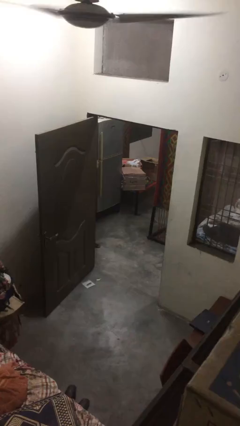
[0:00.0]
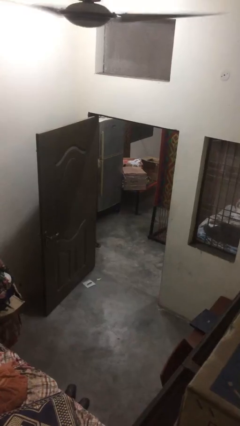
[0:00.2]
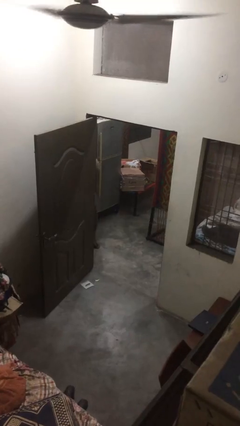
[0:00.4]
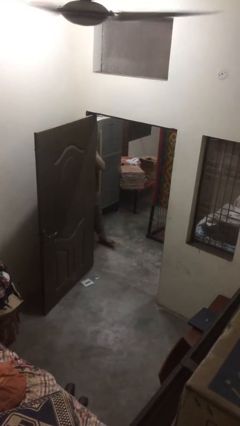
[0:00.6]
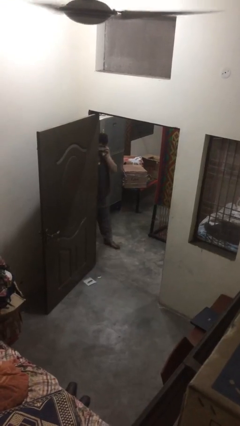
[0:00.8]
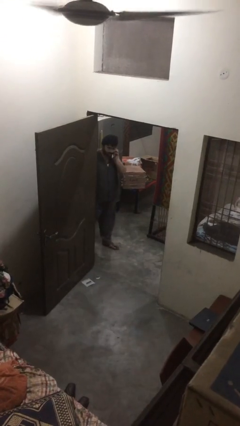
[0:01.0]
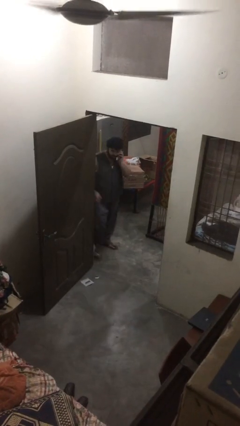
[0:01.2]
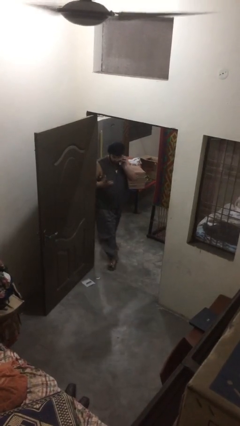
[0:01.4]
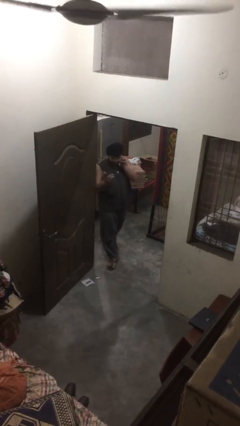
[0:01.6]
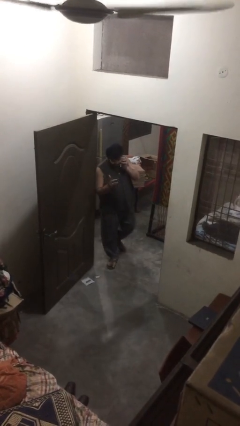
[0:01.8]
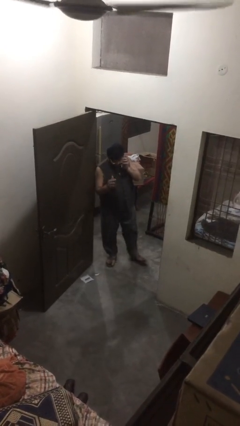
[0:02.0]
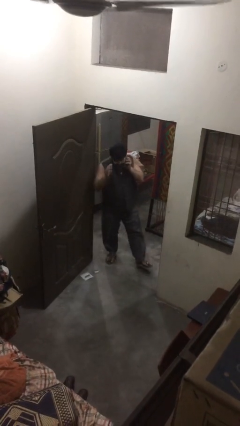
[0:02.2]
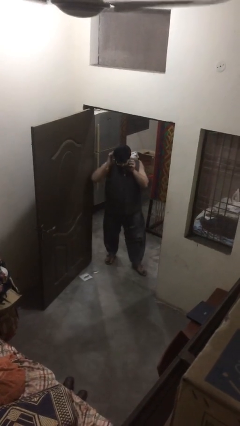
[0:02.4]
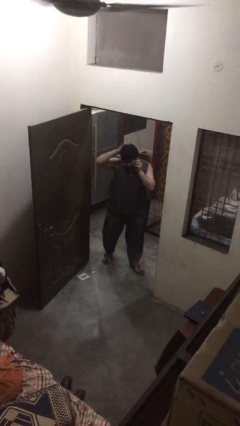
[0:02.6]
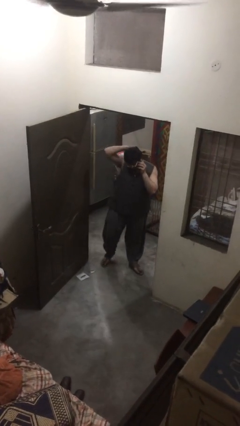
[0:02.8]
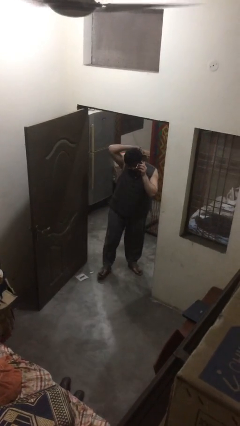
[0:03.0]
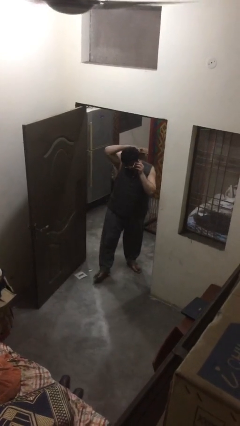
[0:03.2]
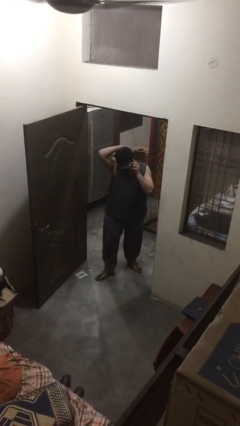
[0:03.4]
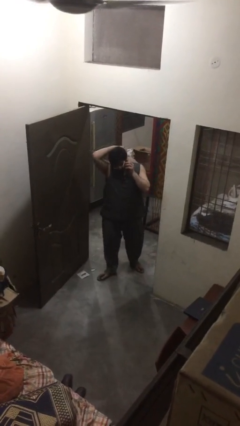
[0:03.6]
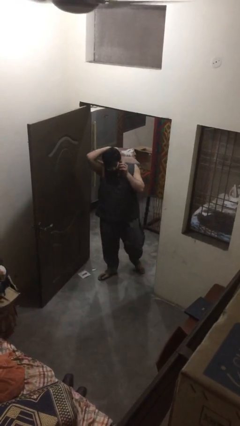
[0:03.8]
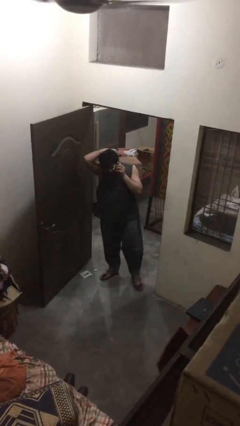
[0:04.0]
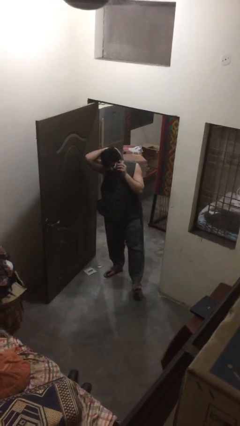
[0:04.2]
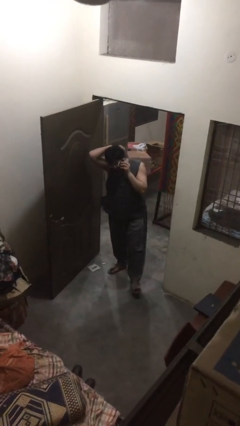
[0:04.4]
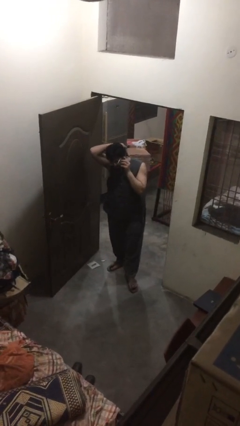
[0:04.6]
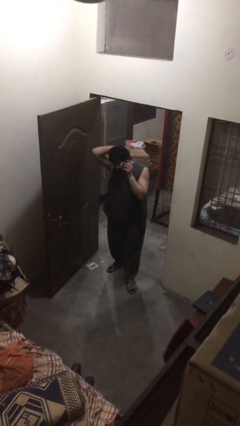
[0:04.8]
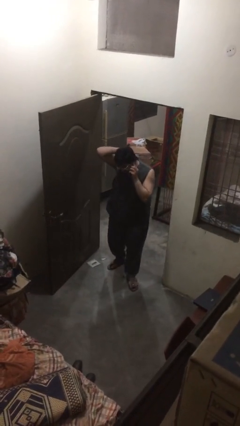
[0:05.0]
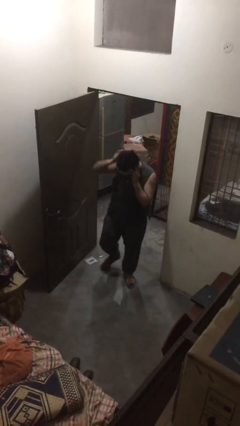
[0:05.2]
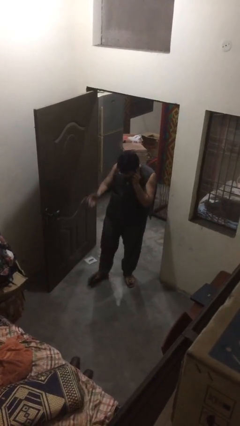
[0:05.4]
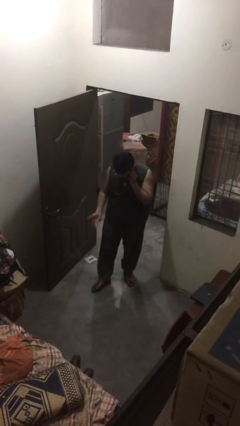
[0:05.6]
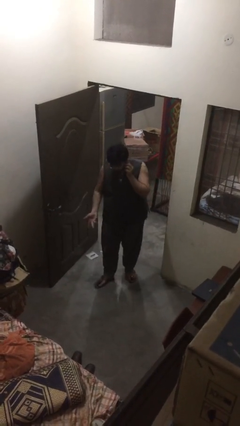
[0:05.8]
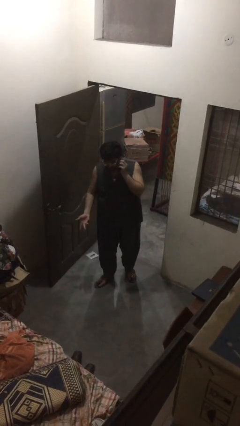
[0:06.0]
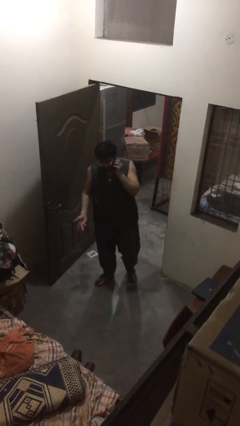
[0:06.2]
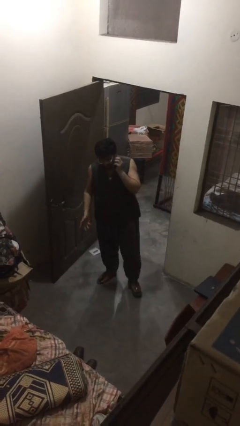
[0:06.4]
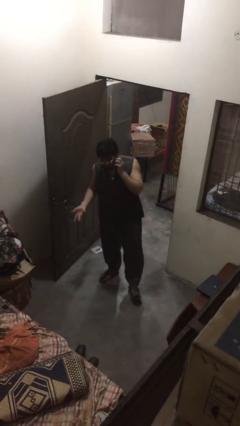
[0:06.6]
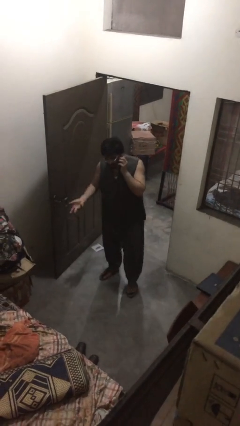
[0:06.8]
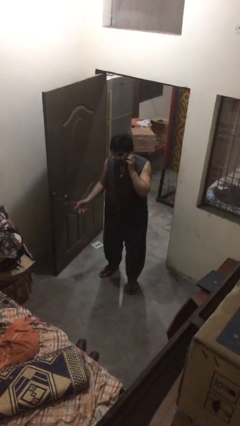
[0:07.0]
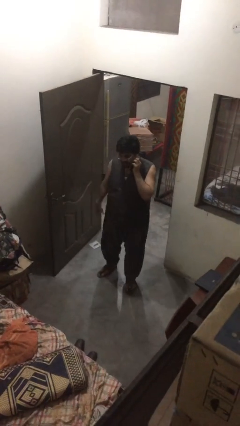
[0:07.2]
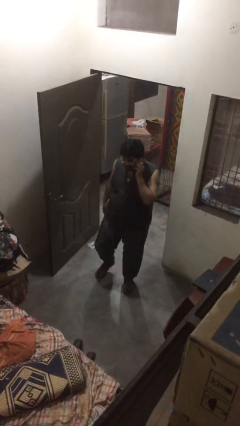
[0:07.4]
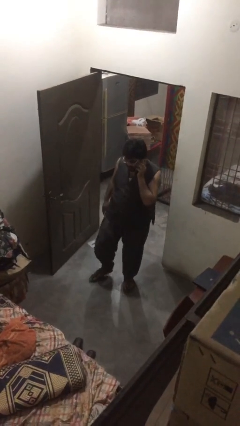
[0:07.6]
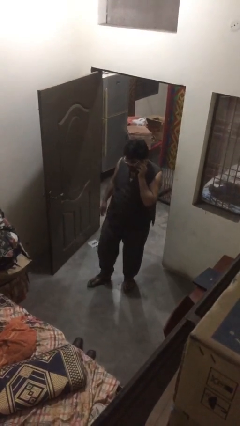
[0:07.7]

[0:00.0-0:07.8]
person enters scene through structure

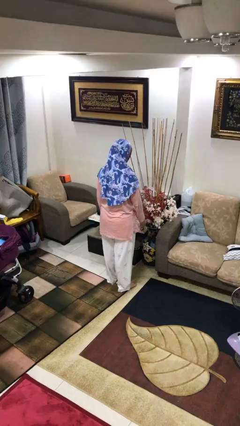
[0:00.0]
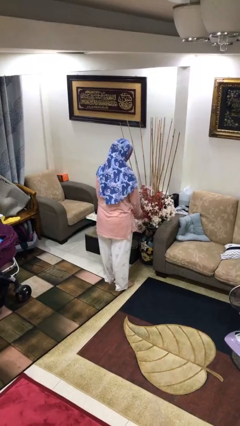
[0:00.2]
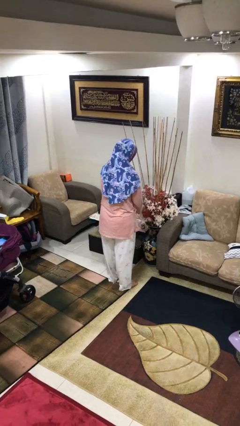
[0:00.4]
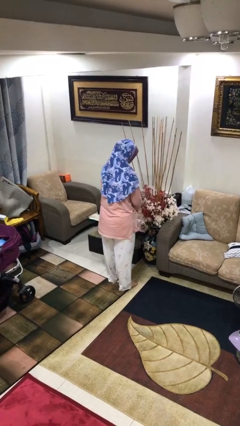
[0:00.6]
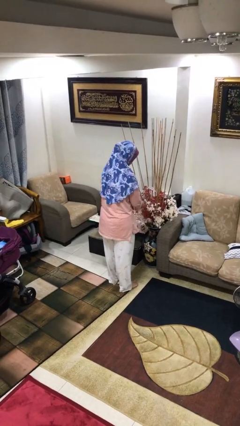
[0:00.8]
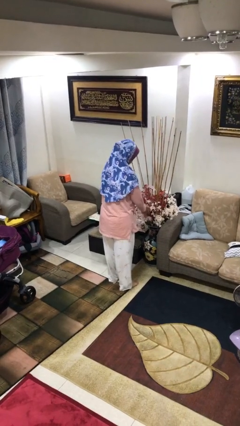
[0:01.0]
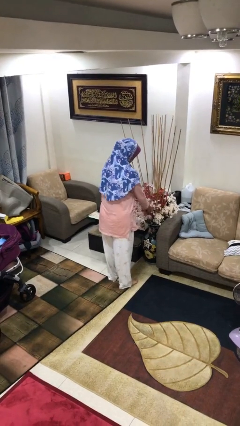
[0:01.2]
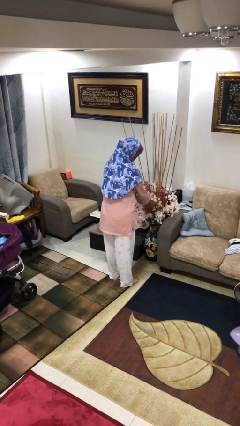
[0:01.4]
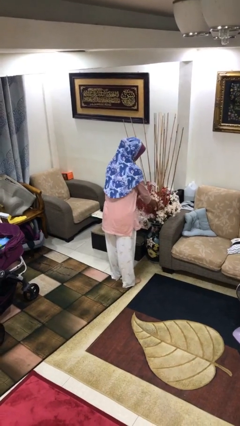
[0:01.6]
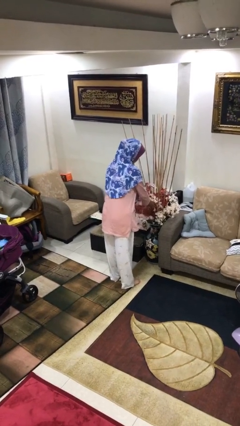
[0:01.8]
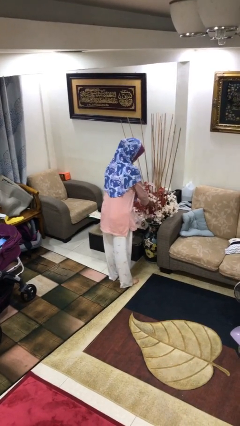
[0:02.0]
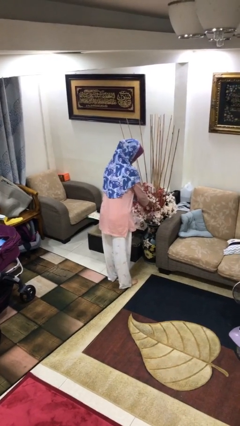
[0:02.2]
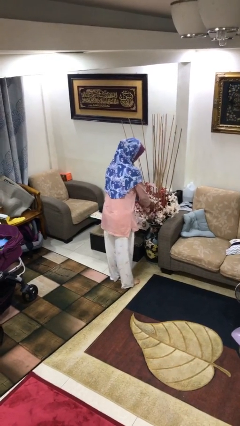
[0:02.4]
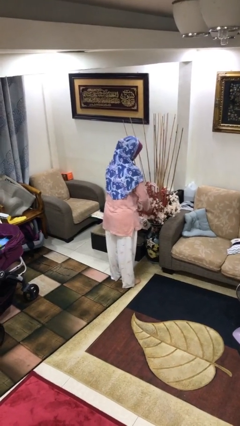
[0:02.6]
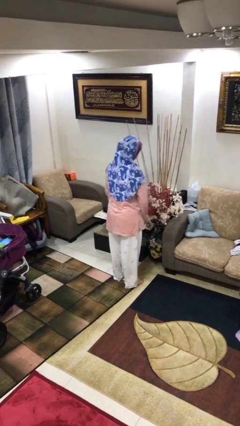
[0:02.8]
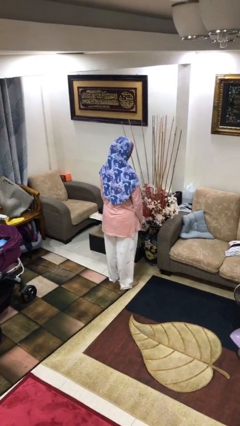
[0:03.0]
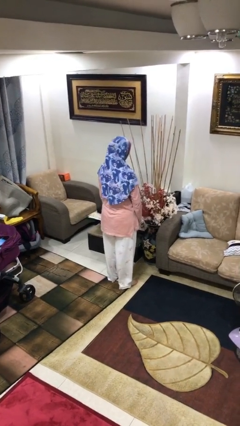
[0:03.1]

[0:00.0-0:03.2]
person arranges flowers in vase

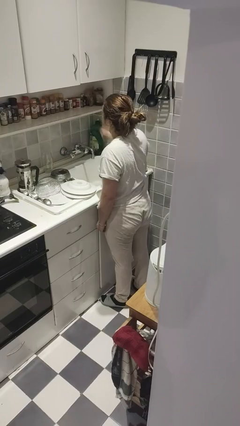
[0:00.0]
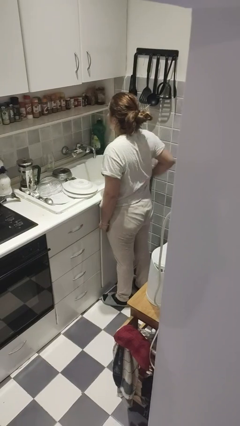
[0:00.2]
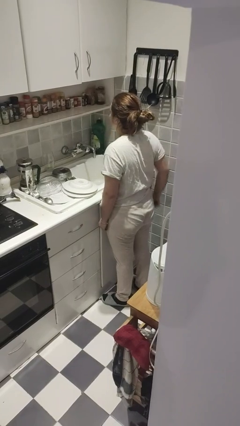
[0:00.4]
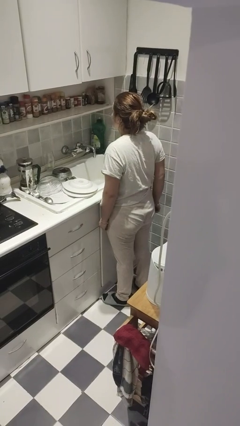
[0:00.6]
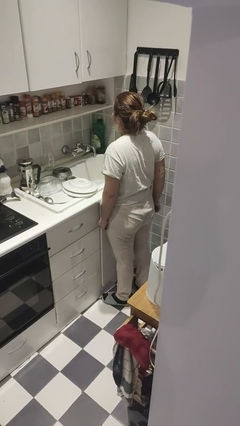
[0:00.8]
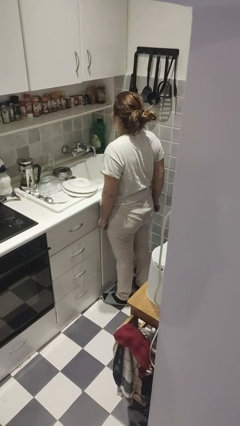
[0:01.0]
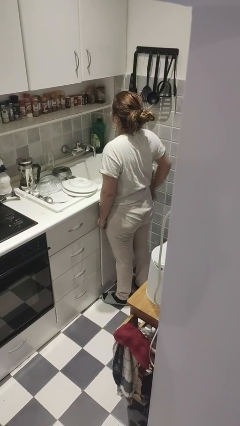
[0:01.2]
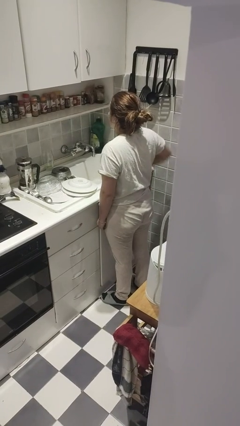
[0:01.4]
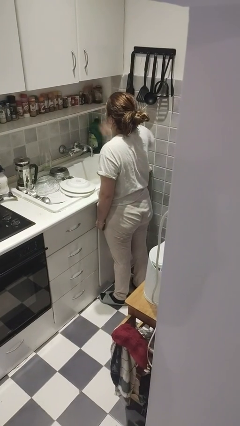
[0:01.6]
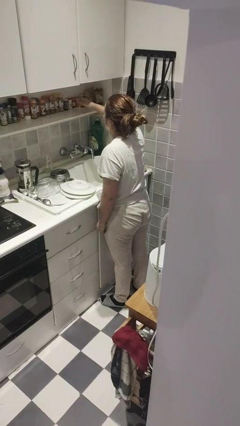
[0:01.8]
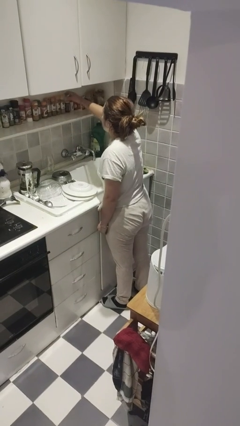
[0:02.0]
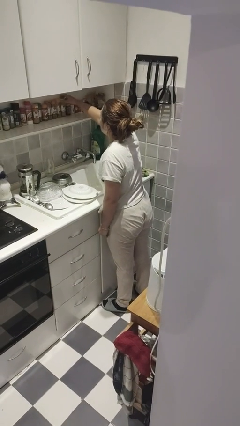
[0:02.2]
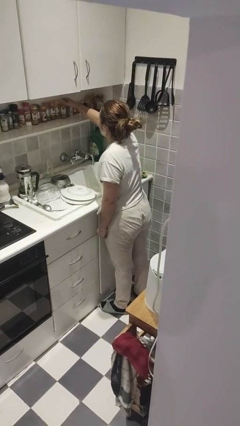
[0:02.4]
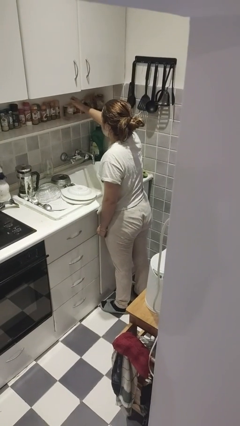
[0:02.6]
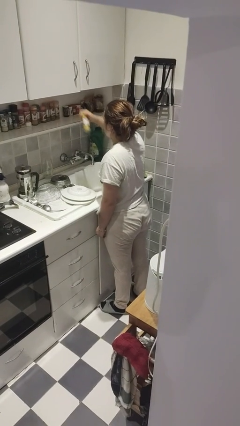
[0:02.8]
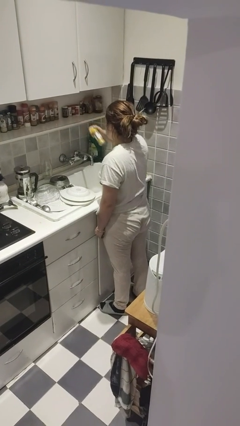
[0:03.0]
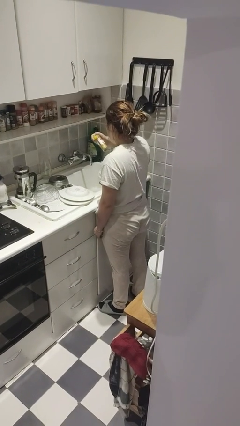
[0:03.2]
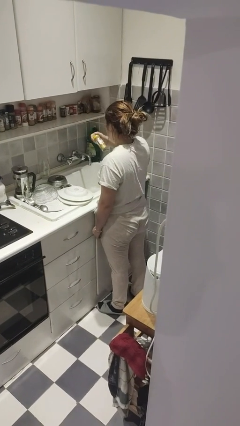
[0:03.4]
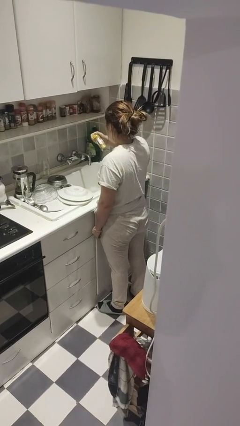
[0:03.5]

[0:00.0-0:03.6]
person picks up object from countertop

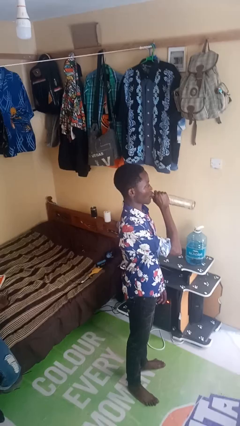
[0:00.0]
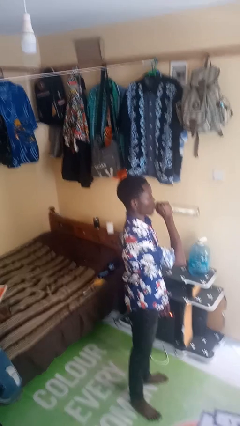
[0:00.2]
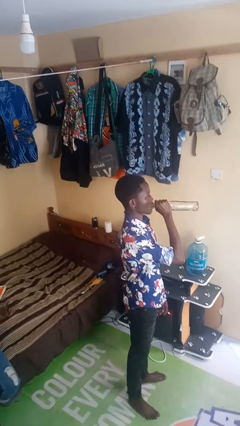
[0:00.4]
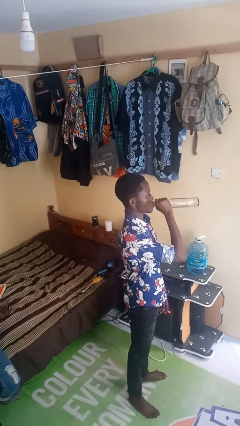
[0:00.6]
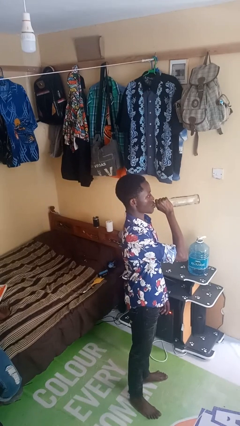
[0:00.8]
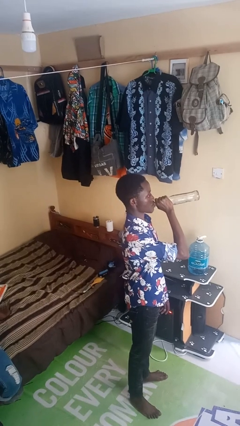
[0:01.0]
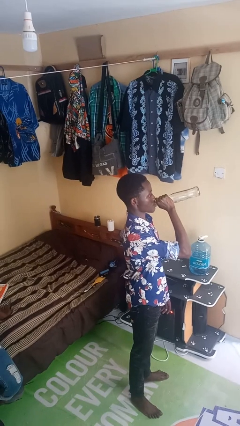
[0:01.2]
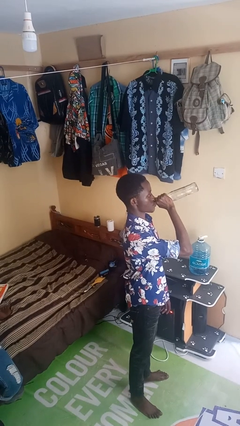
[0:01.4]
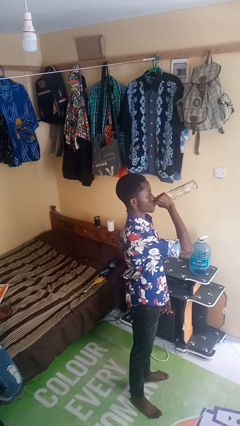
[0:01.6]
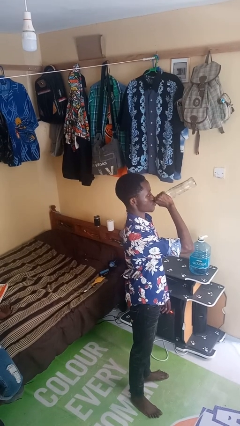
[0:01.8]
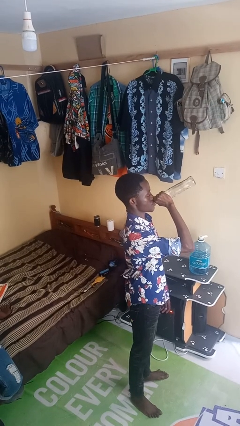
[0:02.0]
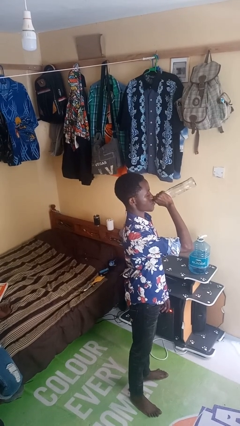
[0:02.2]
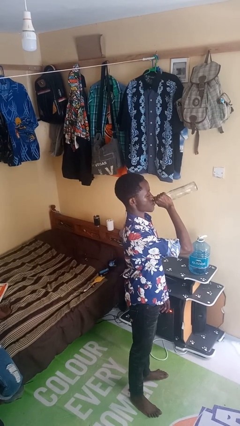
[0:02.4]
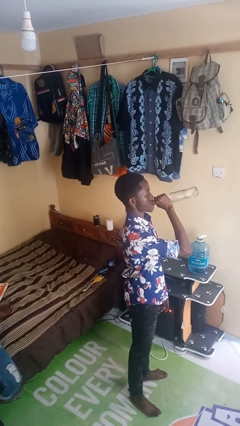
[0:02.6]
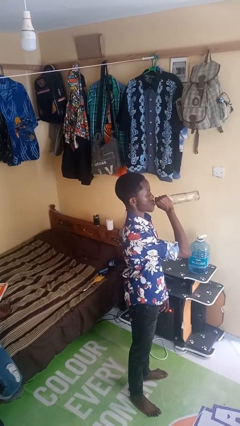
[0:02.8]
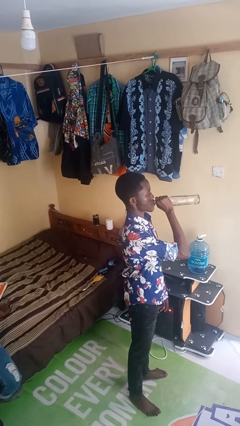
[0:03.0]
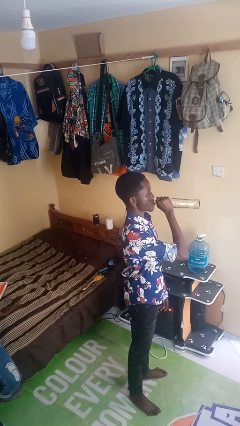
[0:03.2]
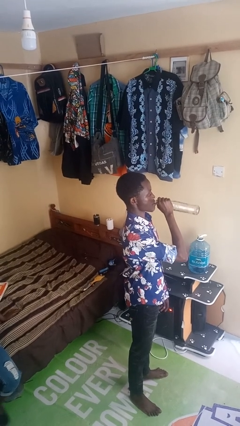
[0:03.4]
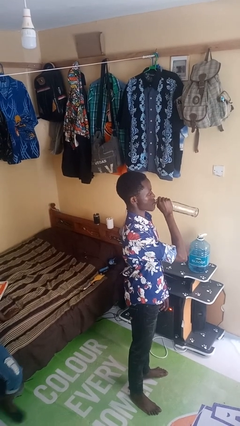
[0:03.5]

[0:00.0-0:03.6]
person drinks from bottle
